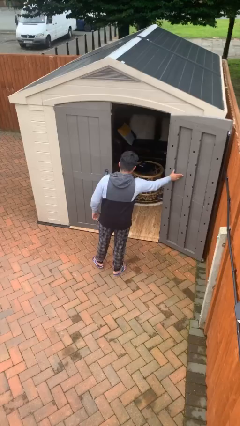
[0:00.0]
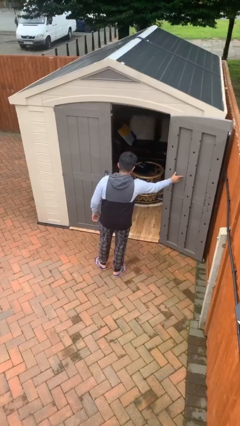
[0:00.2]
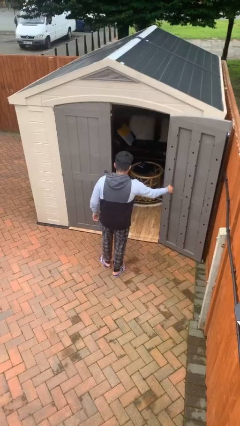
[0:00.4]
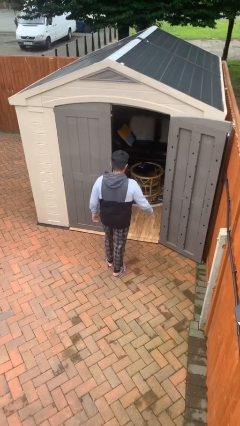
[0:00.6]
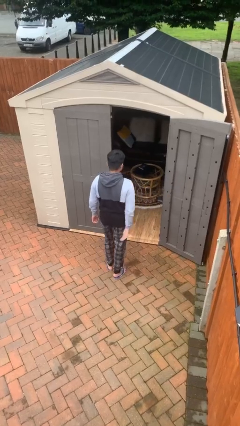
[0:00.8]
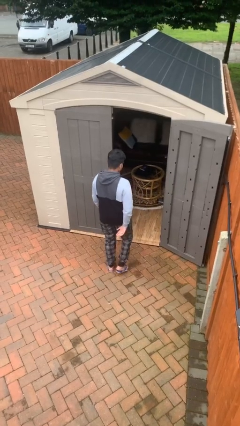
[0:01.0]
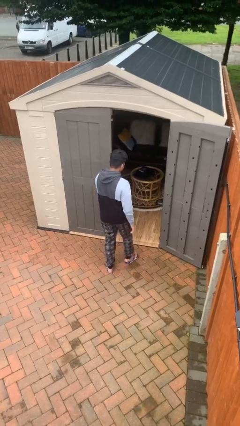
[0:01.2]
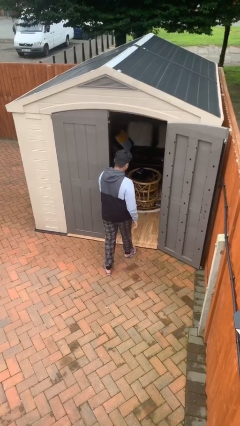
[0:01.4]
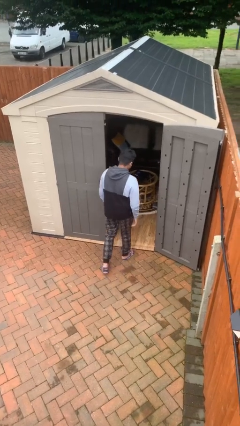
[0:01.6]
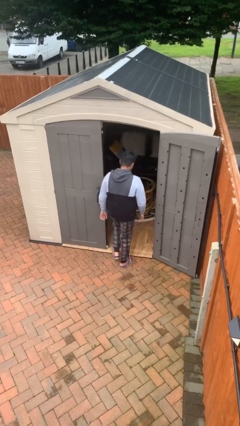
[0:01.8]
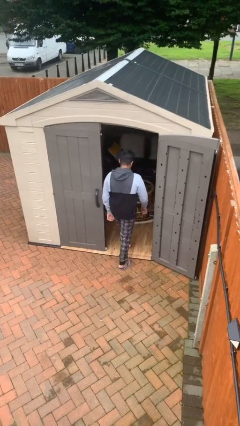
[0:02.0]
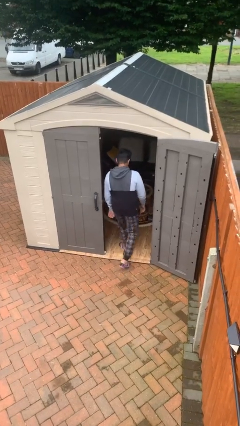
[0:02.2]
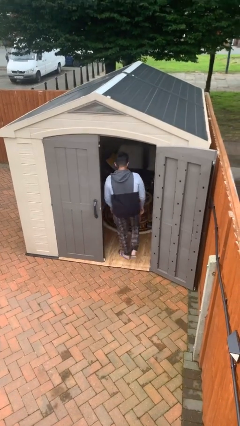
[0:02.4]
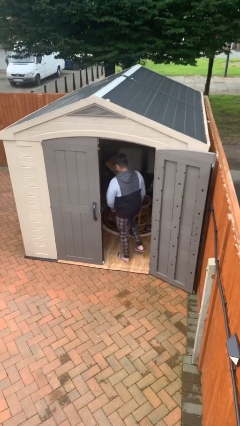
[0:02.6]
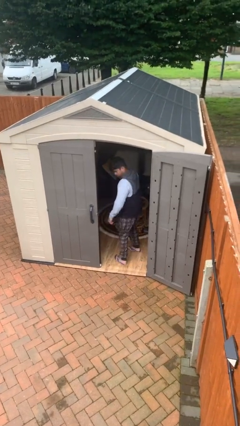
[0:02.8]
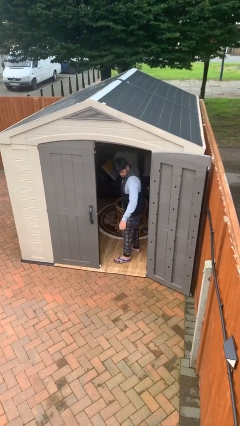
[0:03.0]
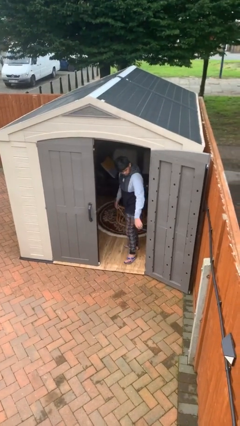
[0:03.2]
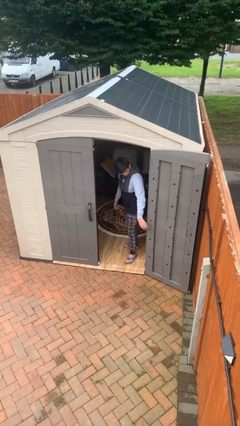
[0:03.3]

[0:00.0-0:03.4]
person exits scene through structure

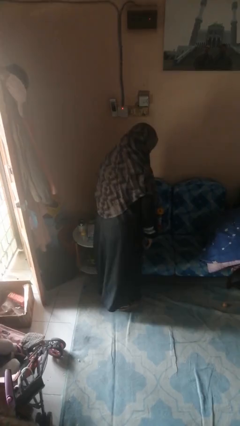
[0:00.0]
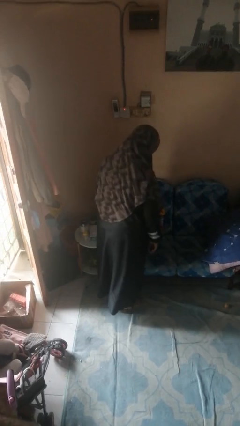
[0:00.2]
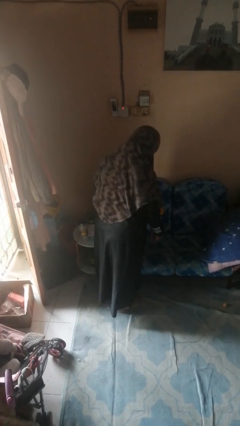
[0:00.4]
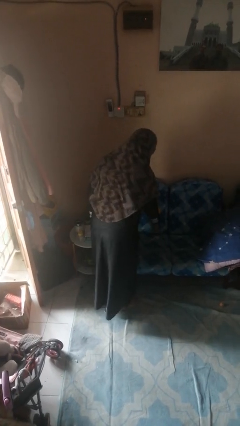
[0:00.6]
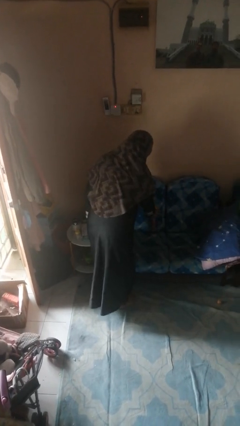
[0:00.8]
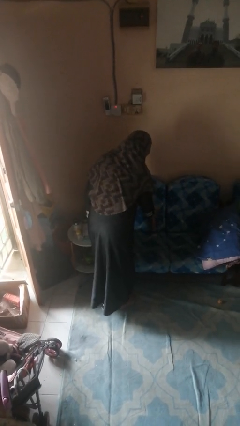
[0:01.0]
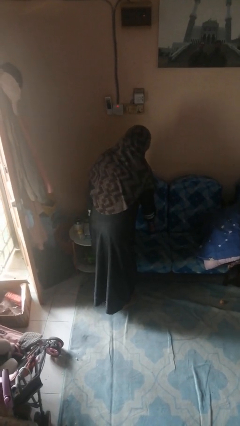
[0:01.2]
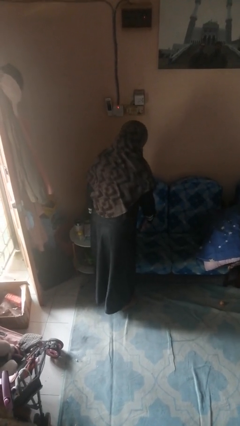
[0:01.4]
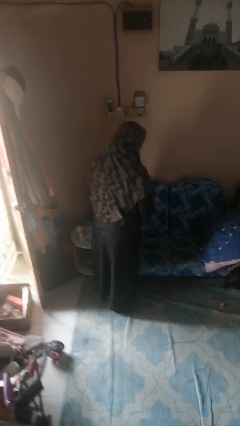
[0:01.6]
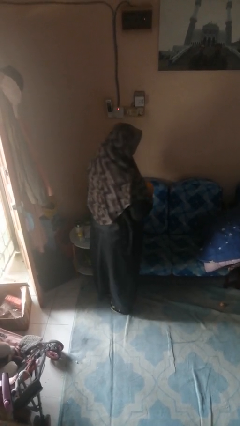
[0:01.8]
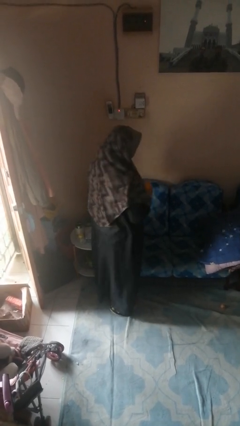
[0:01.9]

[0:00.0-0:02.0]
person picks up object from couch

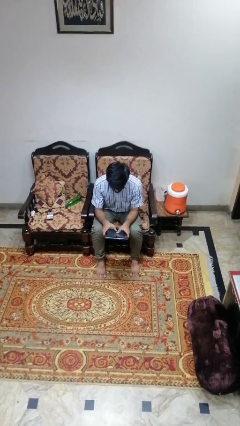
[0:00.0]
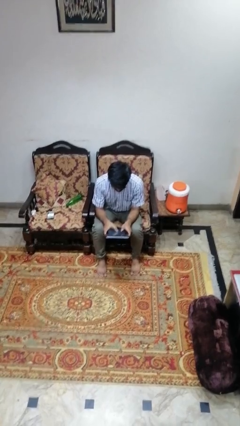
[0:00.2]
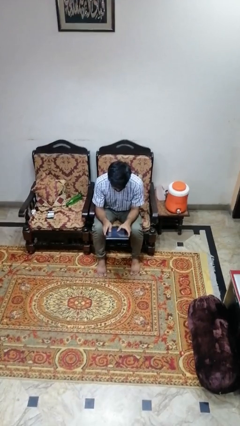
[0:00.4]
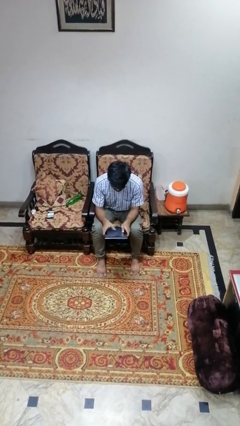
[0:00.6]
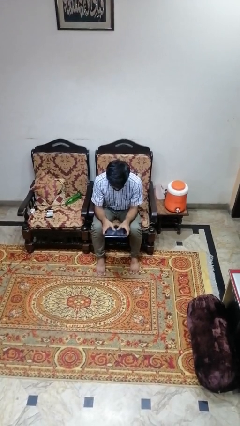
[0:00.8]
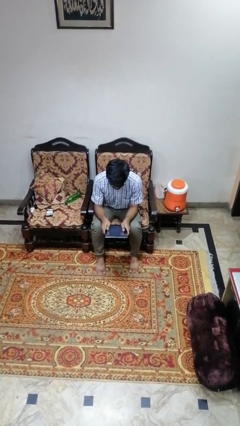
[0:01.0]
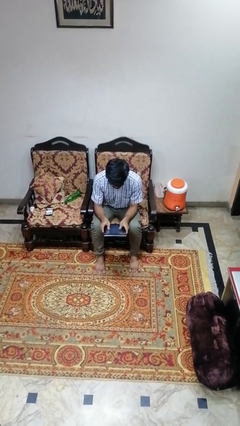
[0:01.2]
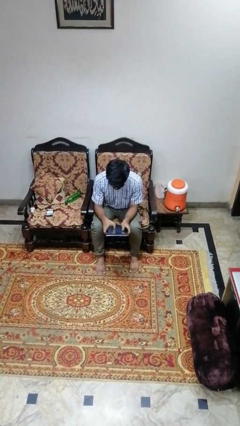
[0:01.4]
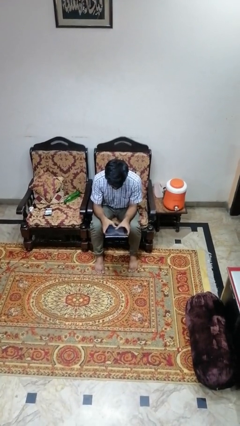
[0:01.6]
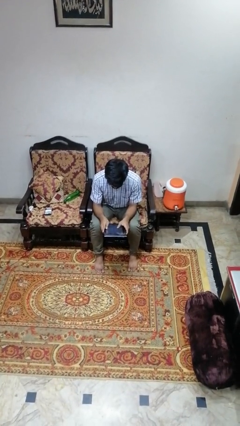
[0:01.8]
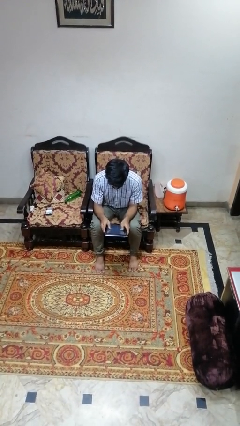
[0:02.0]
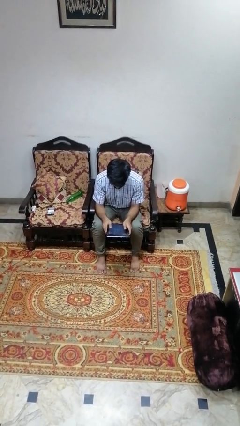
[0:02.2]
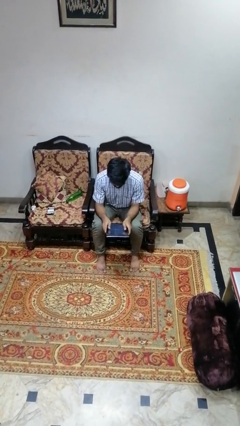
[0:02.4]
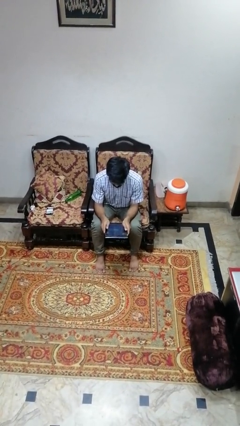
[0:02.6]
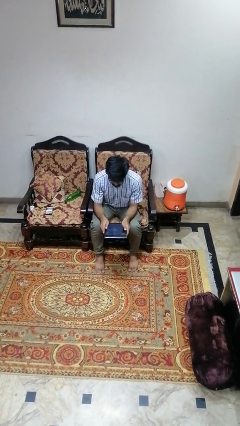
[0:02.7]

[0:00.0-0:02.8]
person interacts with tablet

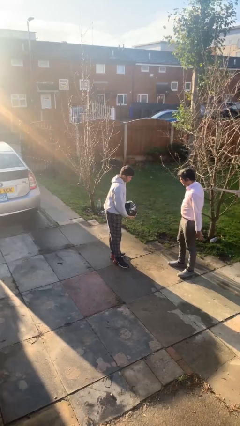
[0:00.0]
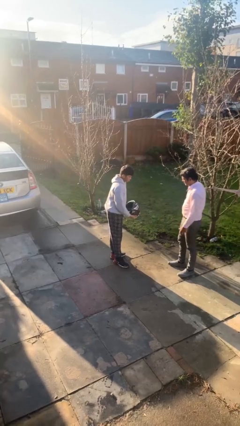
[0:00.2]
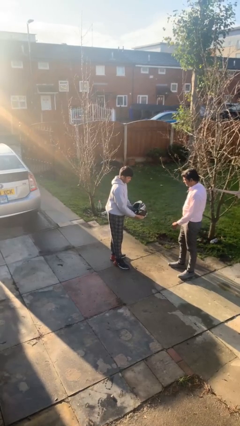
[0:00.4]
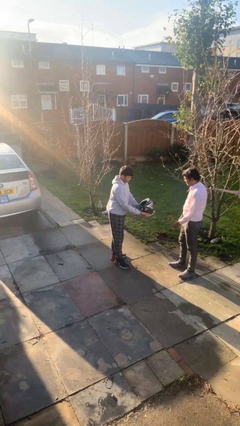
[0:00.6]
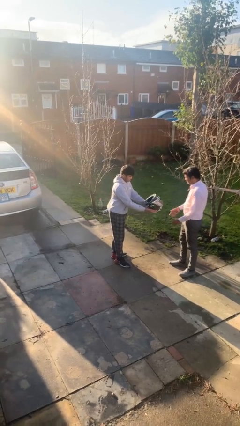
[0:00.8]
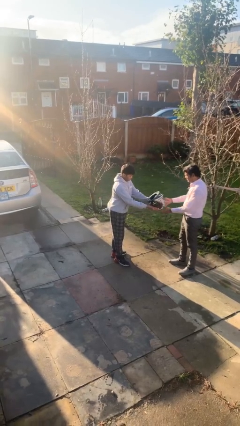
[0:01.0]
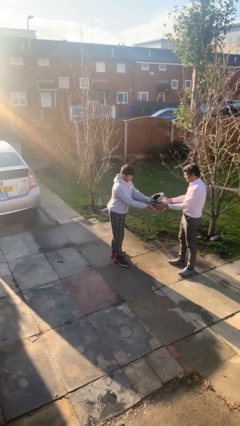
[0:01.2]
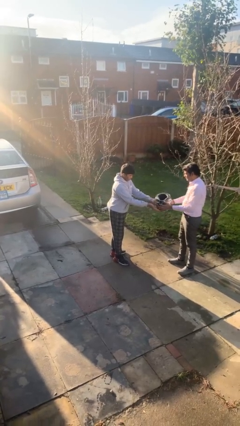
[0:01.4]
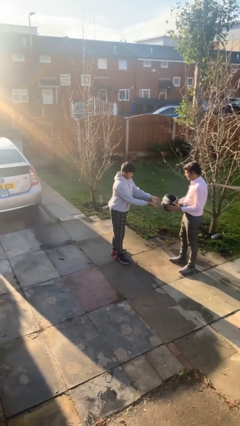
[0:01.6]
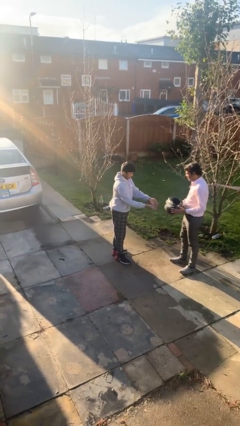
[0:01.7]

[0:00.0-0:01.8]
person transfers object to person

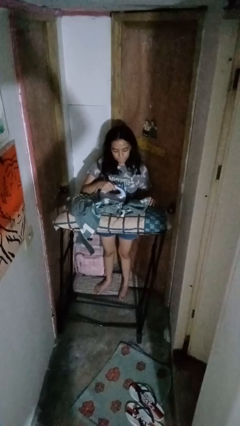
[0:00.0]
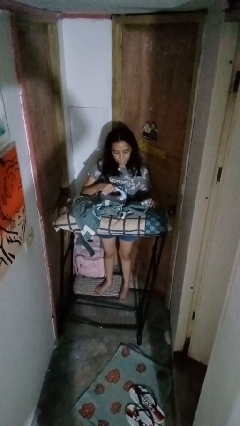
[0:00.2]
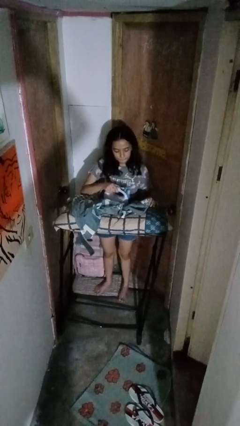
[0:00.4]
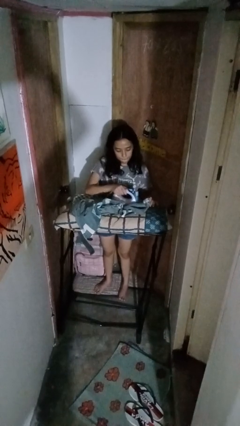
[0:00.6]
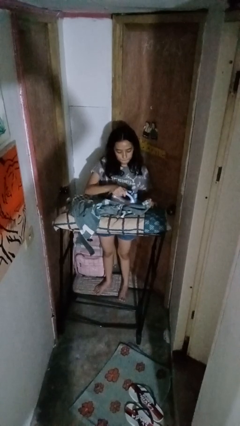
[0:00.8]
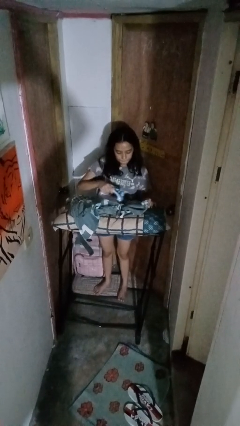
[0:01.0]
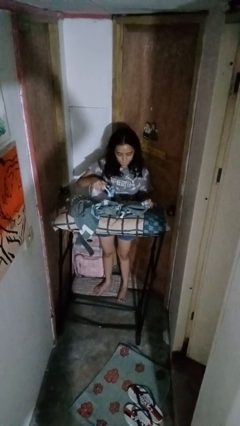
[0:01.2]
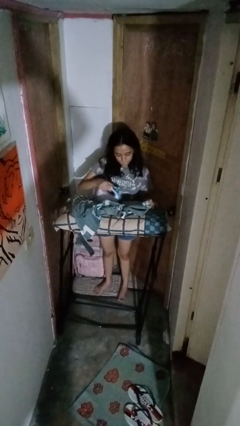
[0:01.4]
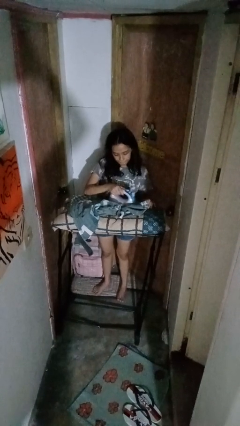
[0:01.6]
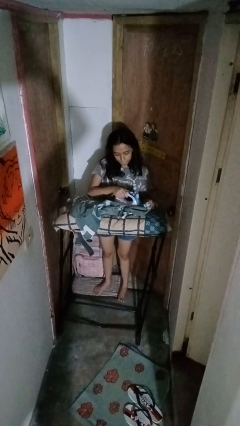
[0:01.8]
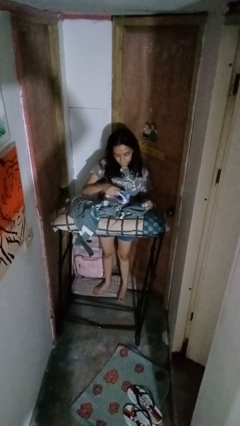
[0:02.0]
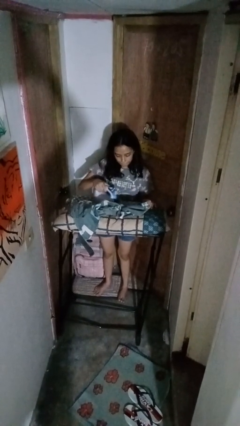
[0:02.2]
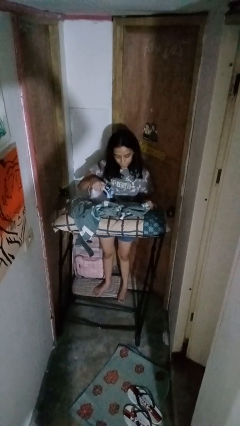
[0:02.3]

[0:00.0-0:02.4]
person irons clothes

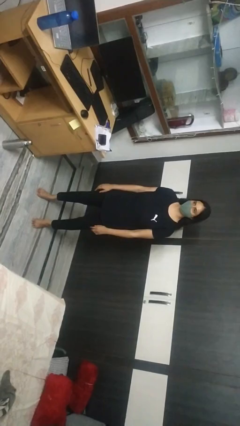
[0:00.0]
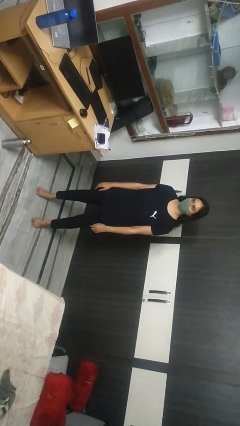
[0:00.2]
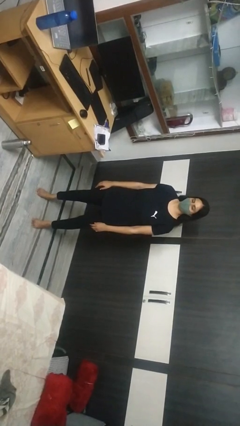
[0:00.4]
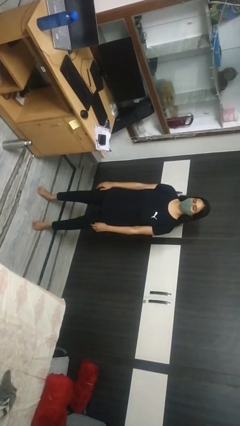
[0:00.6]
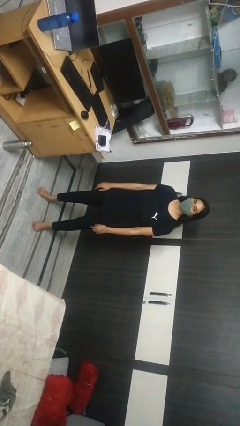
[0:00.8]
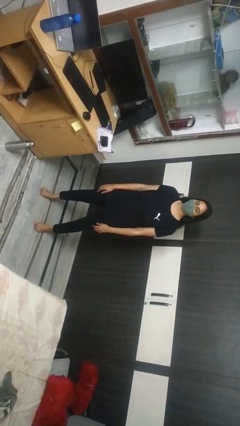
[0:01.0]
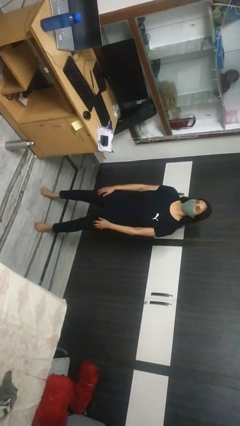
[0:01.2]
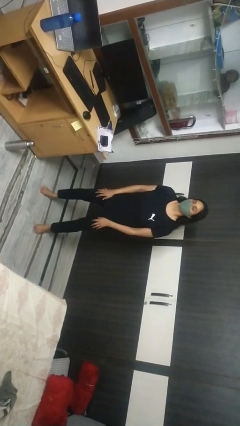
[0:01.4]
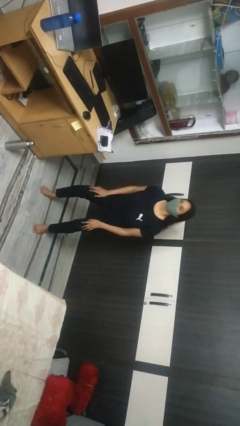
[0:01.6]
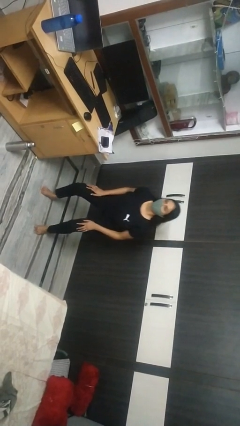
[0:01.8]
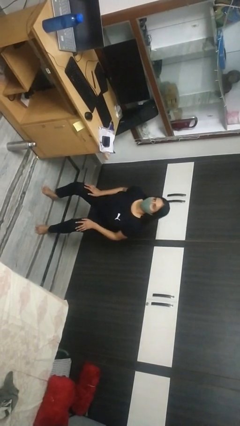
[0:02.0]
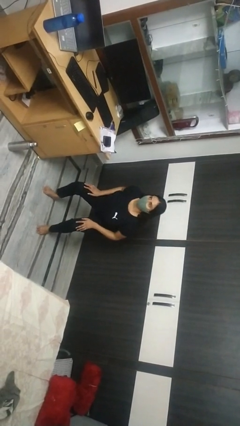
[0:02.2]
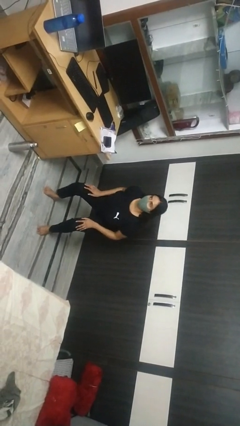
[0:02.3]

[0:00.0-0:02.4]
person squats

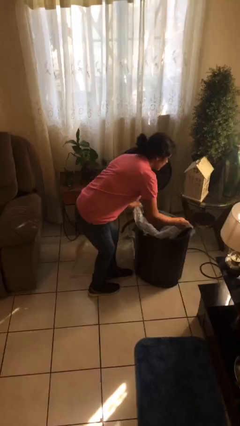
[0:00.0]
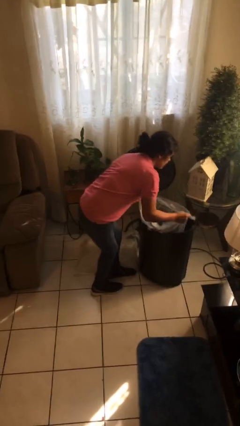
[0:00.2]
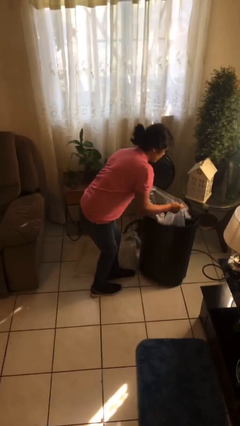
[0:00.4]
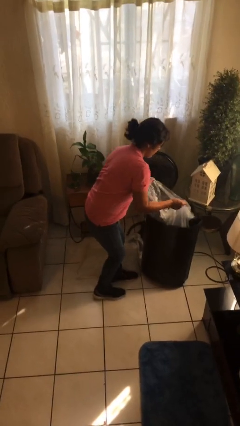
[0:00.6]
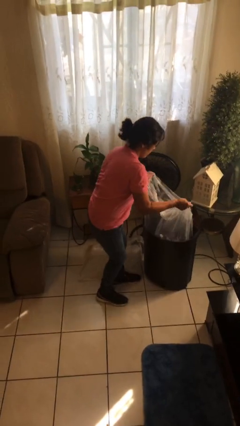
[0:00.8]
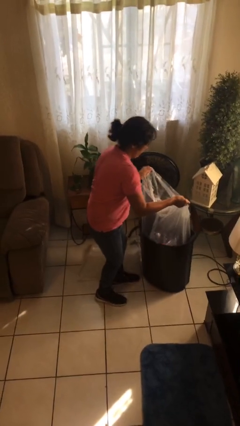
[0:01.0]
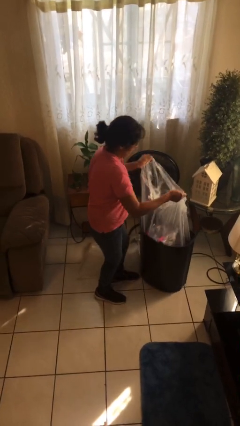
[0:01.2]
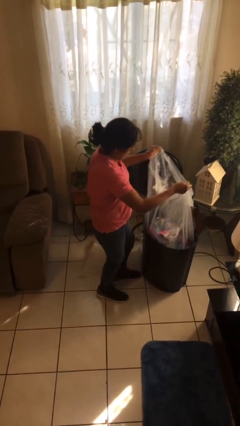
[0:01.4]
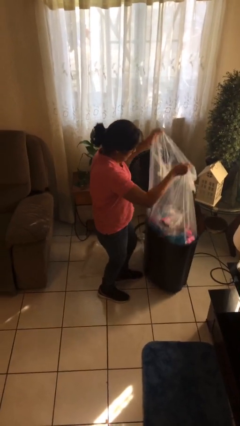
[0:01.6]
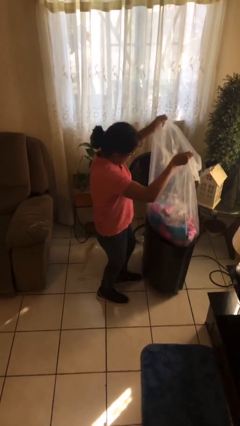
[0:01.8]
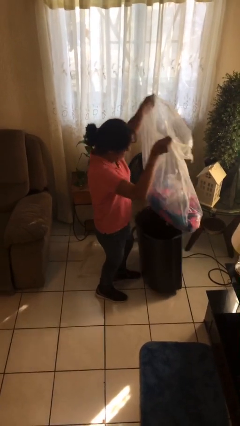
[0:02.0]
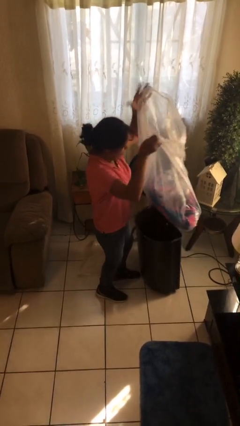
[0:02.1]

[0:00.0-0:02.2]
person removes trashbag from trashcan
